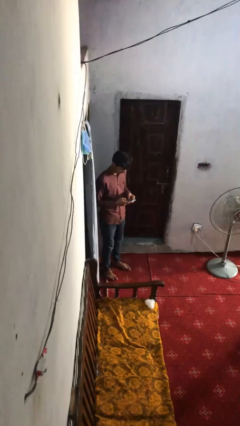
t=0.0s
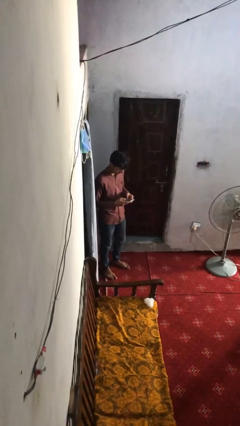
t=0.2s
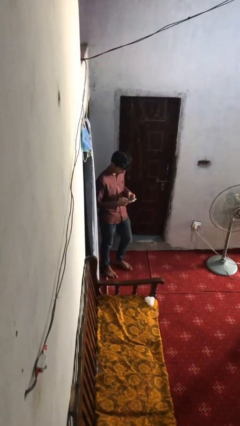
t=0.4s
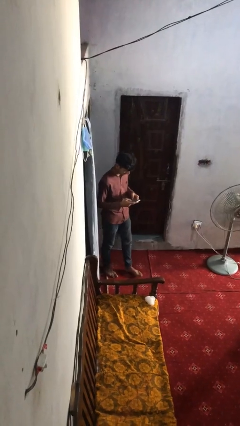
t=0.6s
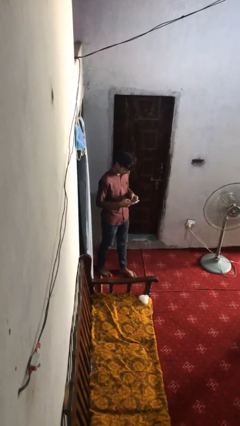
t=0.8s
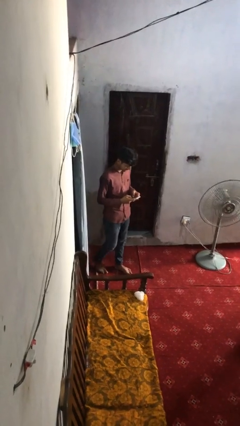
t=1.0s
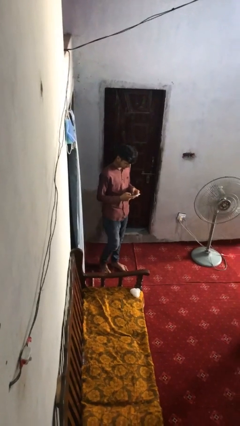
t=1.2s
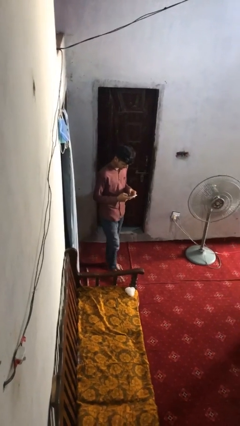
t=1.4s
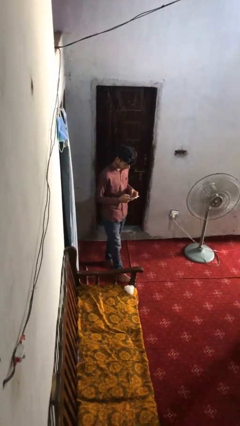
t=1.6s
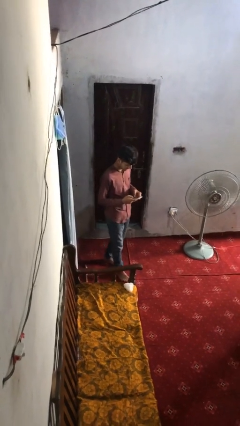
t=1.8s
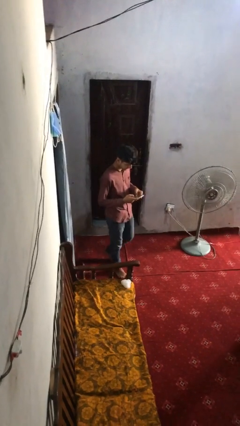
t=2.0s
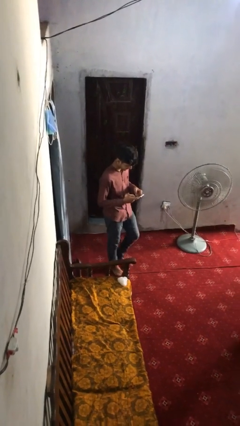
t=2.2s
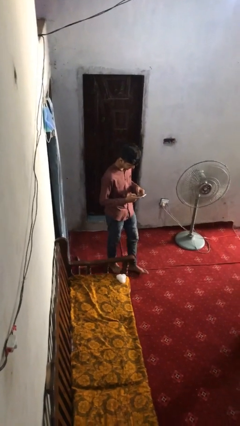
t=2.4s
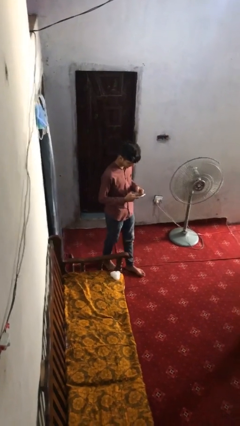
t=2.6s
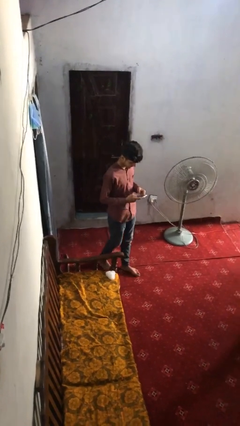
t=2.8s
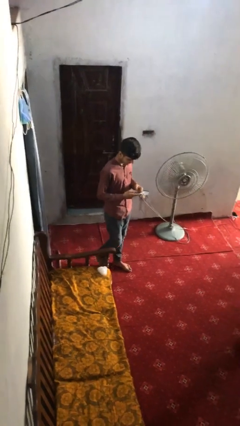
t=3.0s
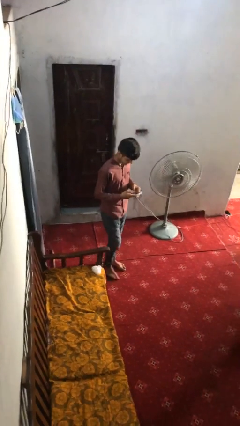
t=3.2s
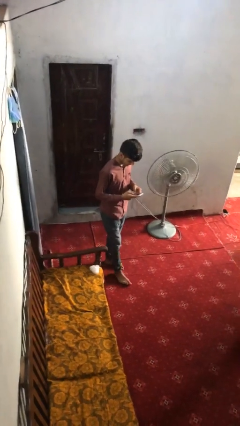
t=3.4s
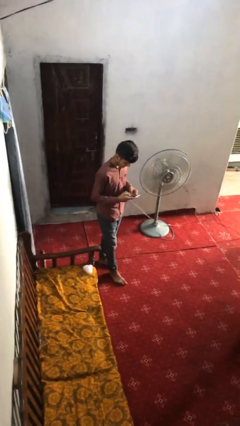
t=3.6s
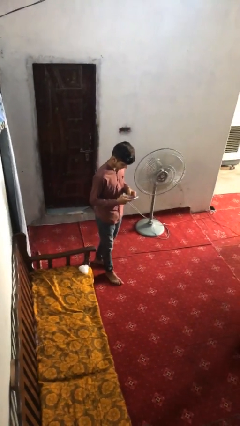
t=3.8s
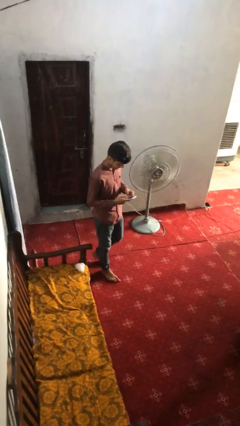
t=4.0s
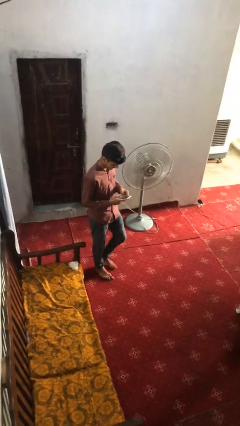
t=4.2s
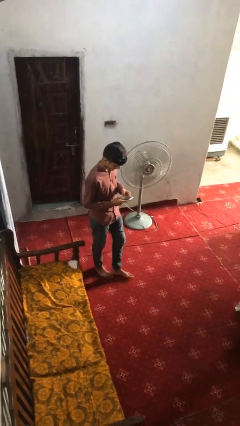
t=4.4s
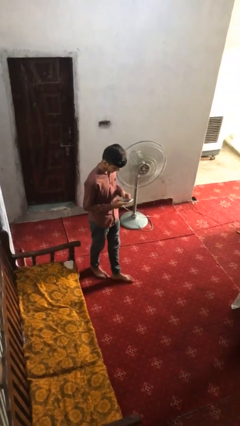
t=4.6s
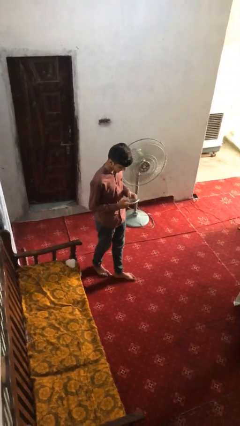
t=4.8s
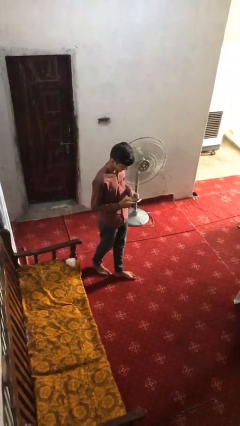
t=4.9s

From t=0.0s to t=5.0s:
person texts on phone

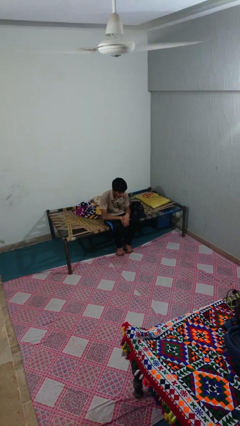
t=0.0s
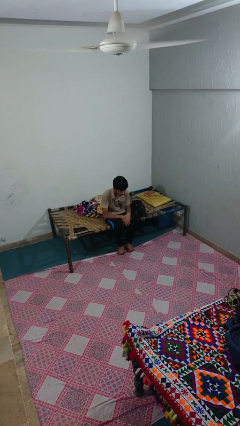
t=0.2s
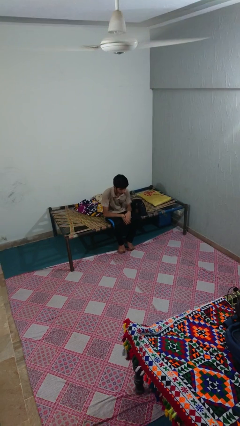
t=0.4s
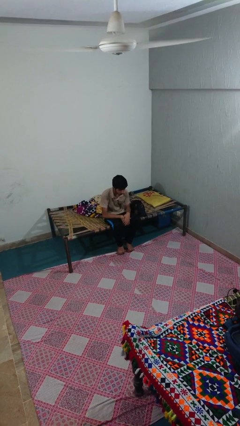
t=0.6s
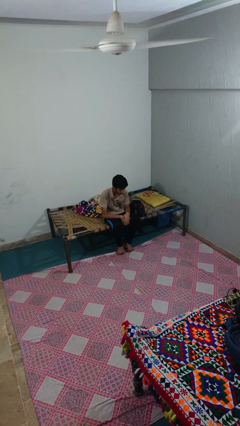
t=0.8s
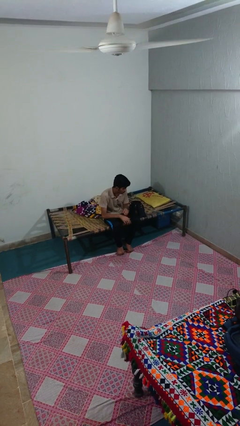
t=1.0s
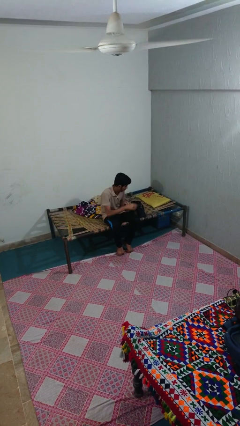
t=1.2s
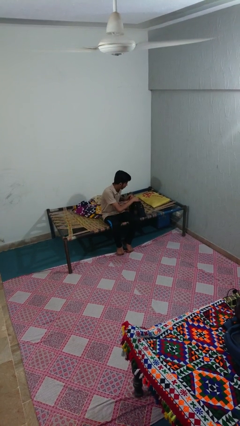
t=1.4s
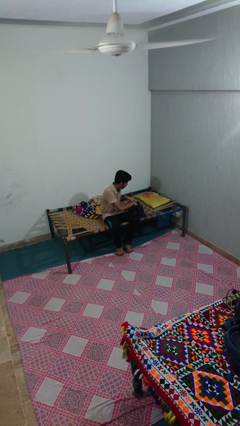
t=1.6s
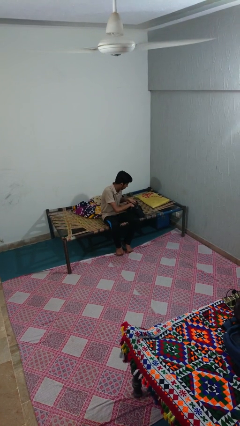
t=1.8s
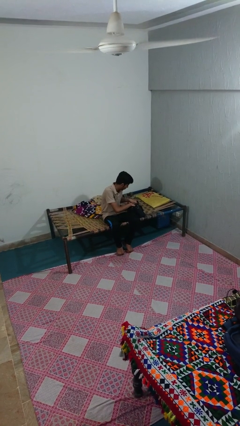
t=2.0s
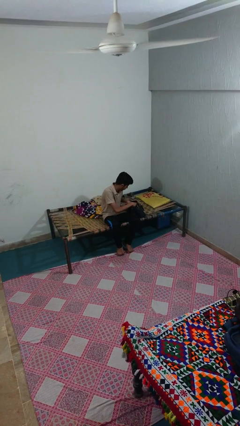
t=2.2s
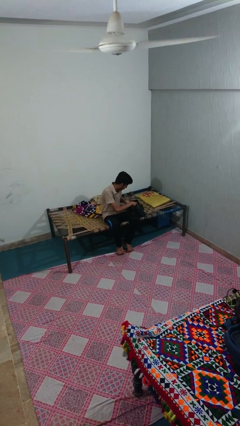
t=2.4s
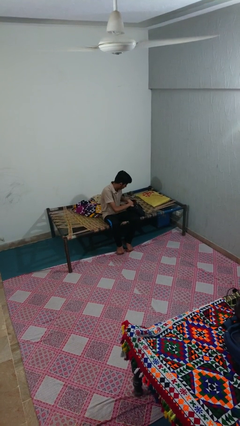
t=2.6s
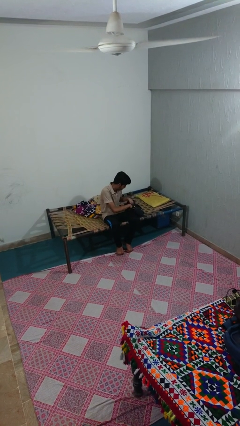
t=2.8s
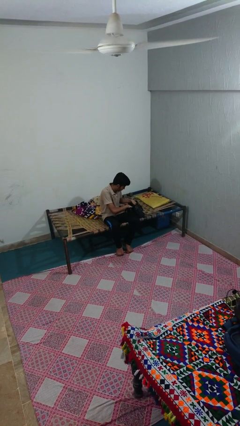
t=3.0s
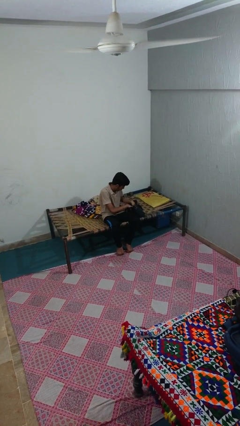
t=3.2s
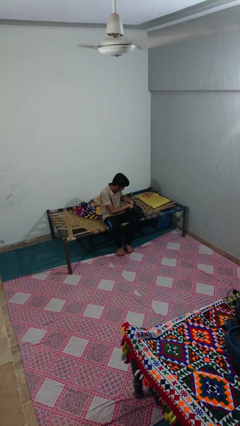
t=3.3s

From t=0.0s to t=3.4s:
person searches in purse

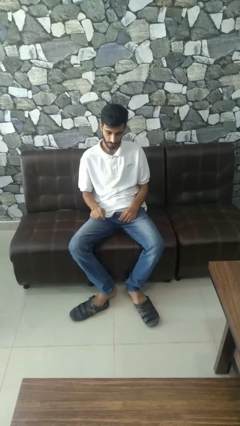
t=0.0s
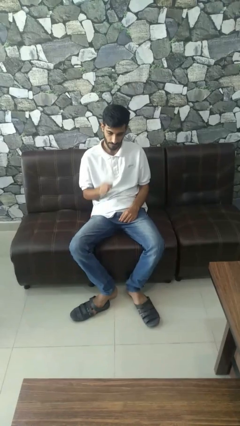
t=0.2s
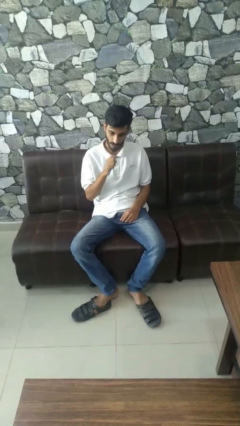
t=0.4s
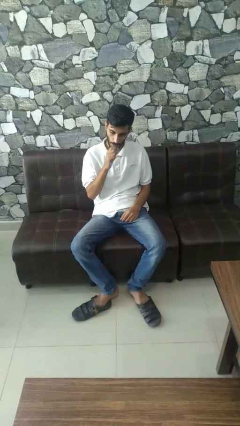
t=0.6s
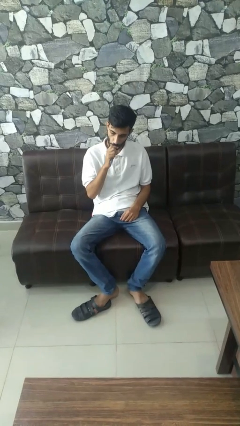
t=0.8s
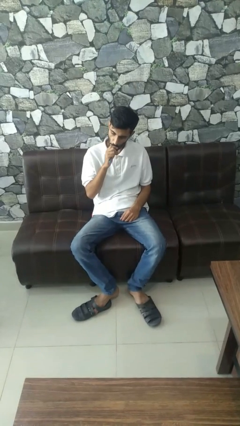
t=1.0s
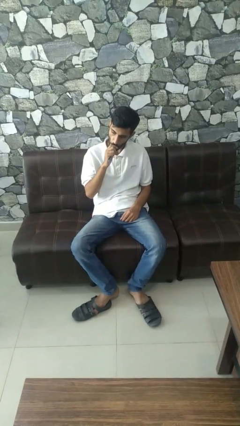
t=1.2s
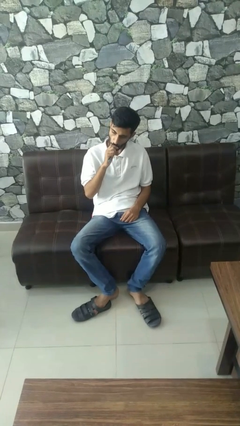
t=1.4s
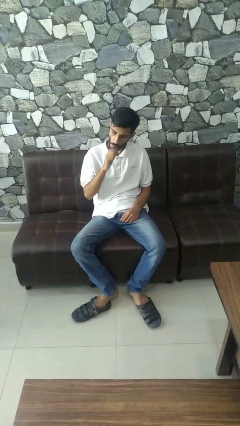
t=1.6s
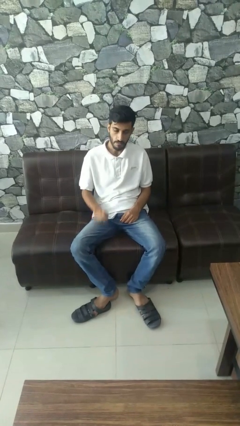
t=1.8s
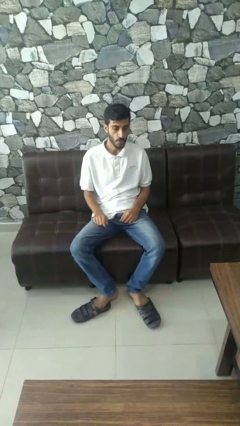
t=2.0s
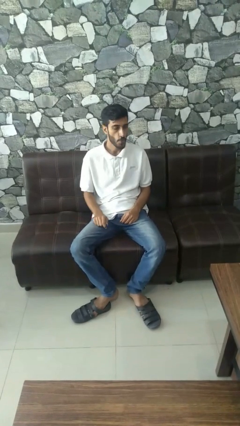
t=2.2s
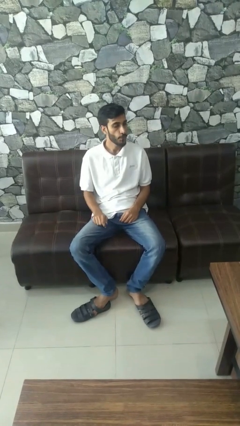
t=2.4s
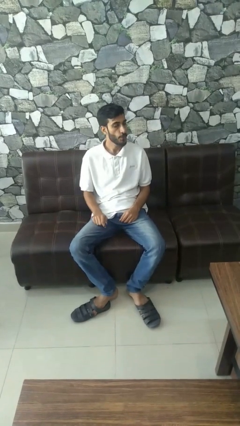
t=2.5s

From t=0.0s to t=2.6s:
person vapes

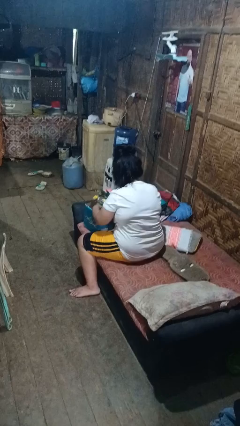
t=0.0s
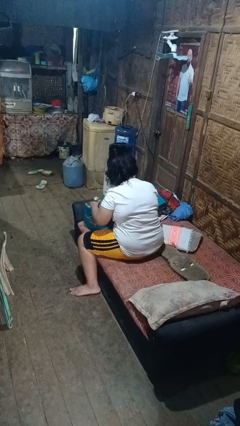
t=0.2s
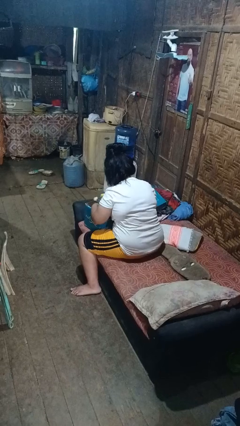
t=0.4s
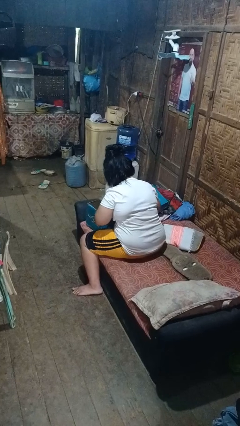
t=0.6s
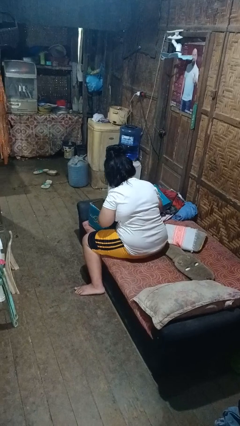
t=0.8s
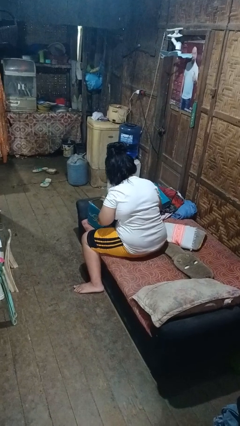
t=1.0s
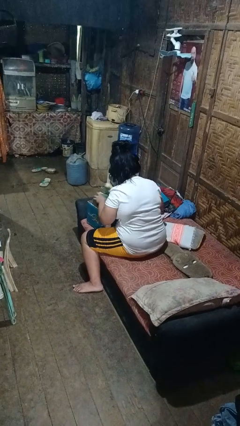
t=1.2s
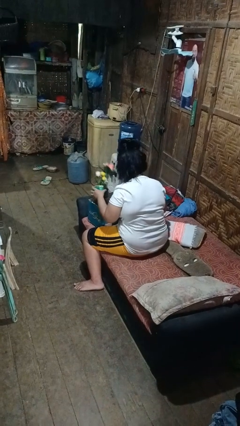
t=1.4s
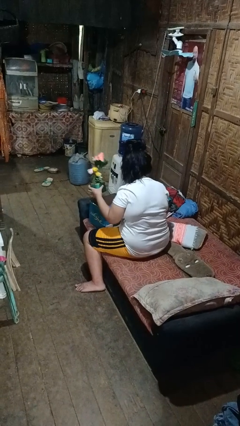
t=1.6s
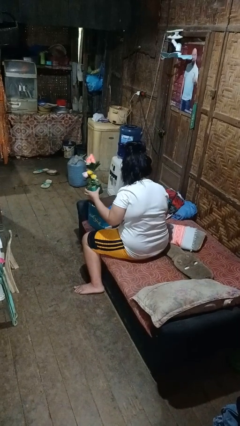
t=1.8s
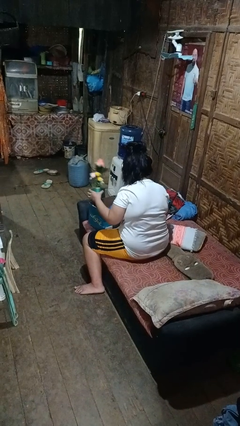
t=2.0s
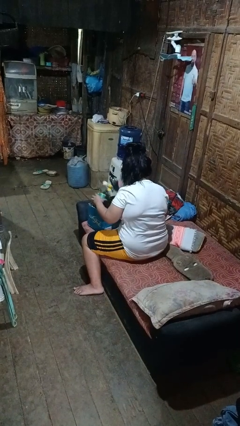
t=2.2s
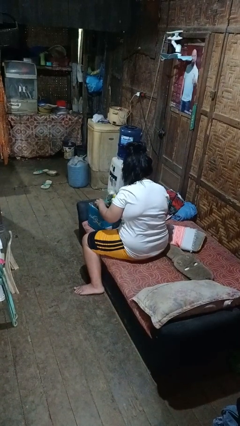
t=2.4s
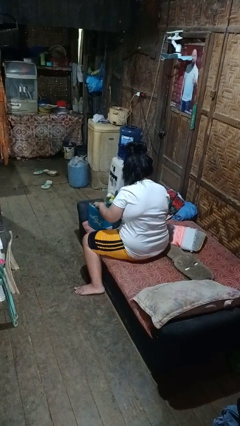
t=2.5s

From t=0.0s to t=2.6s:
person searches in box

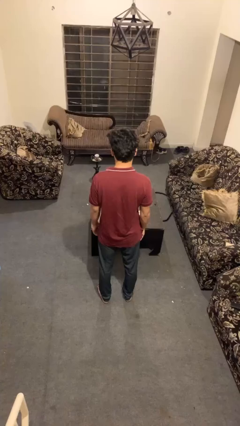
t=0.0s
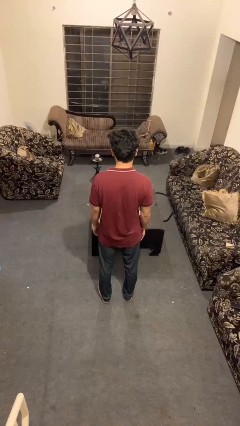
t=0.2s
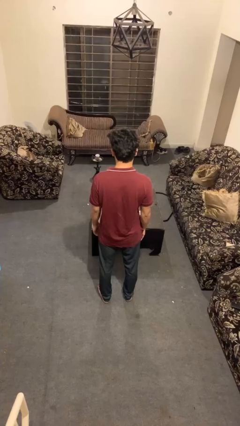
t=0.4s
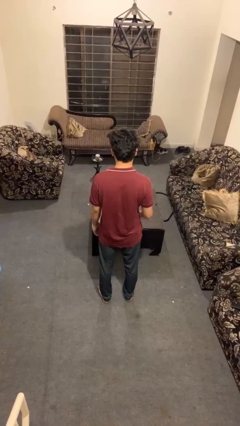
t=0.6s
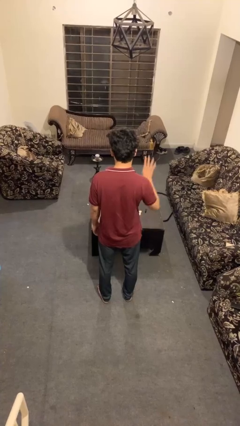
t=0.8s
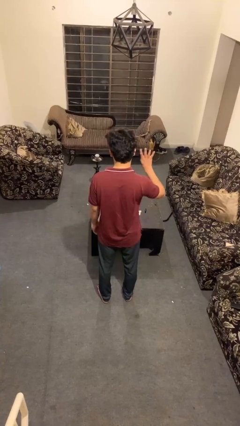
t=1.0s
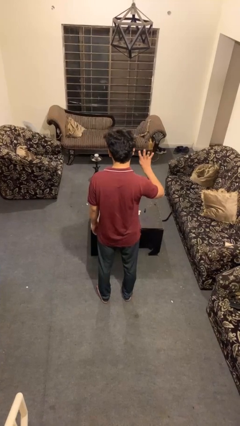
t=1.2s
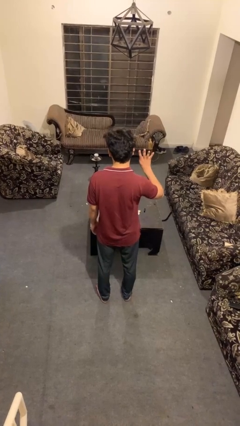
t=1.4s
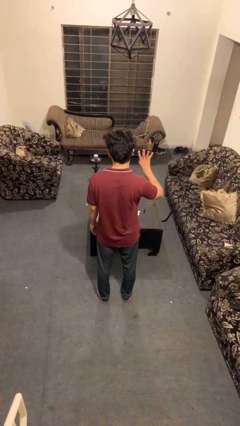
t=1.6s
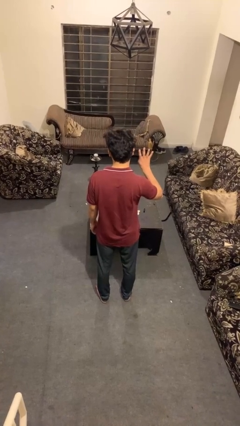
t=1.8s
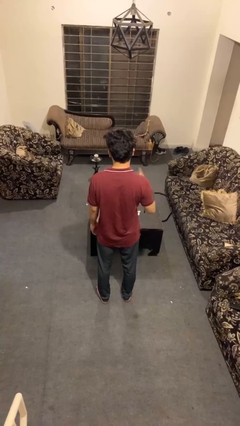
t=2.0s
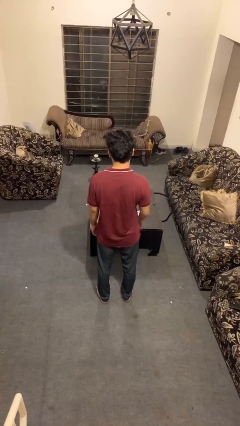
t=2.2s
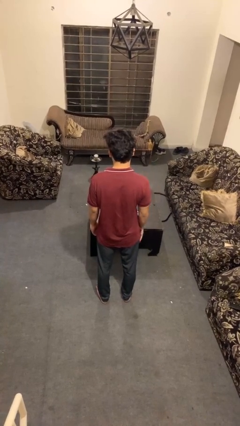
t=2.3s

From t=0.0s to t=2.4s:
person gestures number four

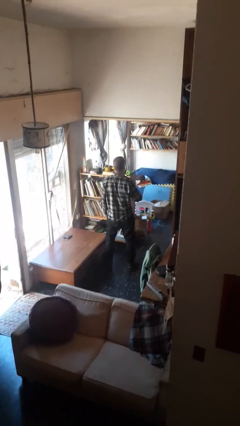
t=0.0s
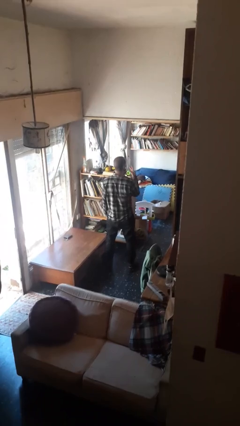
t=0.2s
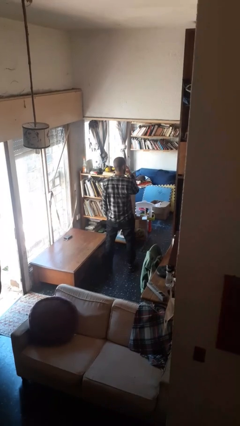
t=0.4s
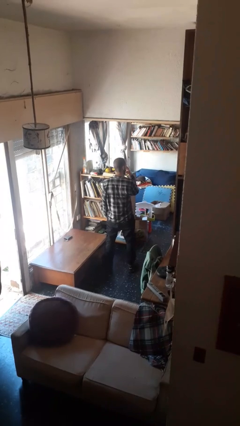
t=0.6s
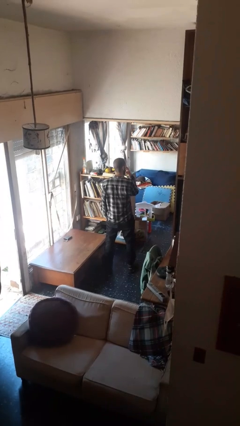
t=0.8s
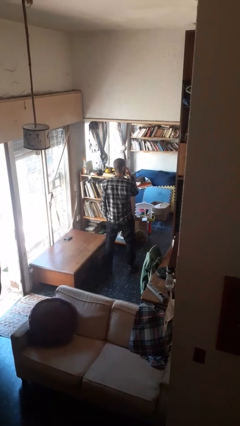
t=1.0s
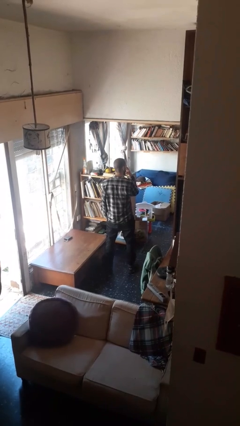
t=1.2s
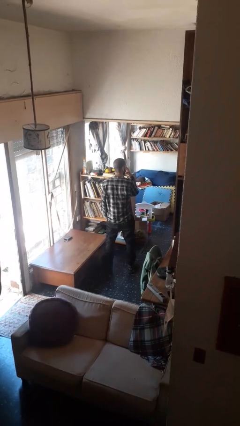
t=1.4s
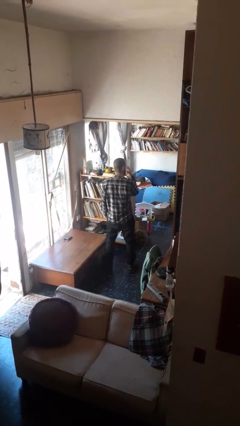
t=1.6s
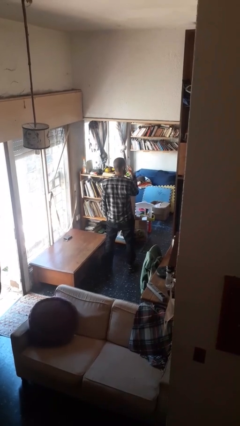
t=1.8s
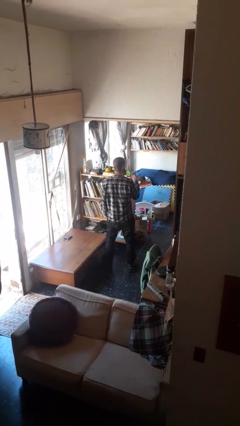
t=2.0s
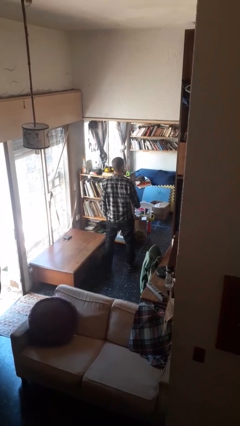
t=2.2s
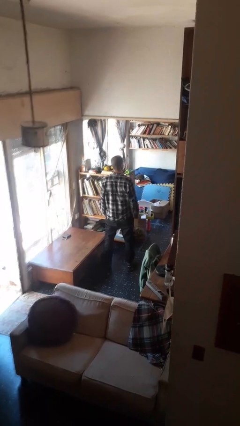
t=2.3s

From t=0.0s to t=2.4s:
person gestures watch closely
